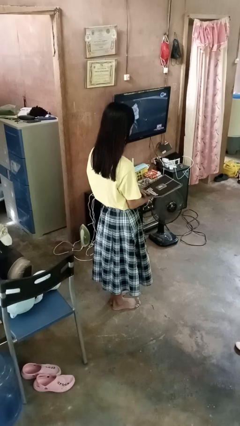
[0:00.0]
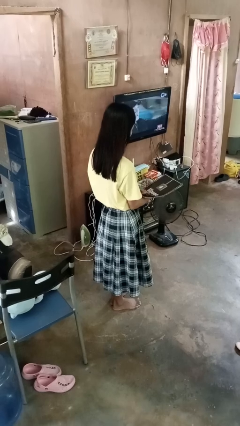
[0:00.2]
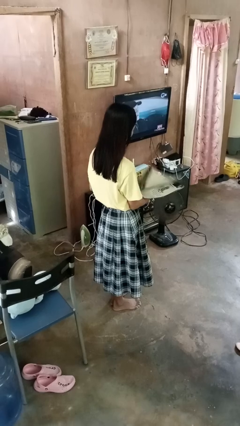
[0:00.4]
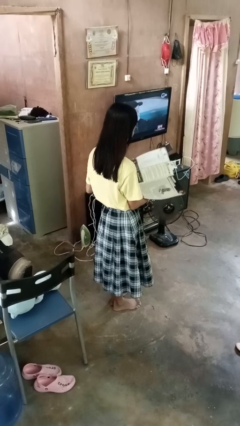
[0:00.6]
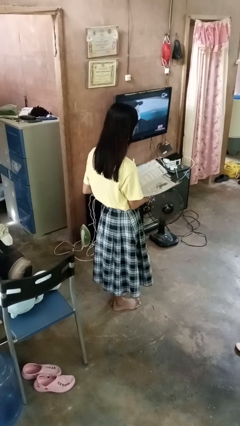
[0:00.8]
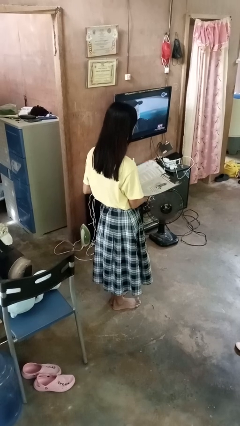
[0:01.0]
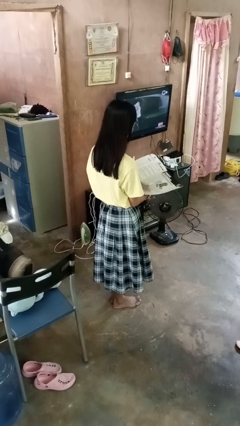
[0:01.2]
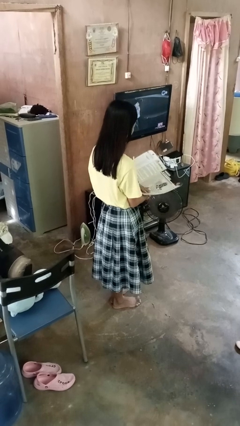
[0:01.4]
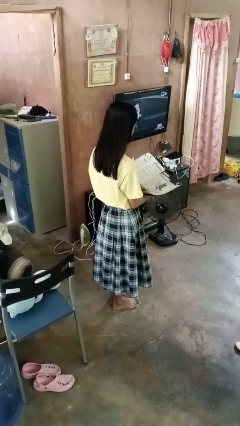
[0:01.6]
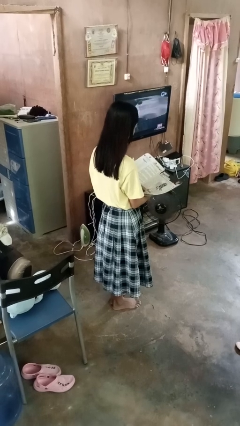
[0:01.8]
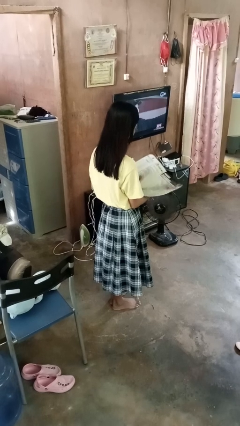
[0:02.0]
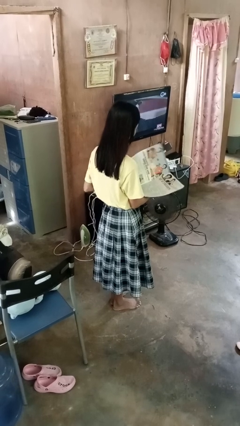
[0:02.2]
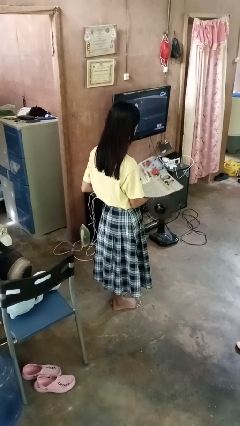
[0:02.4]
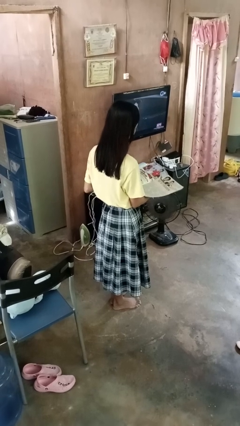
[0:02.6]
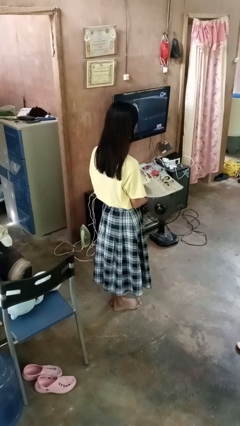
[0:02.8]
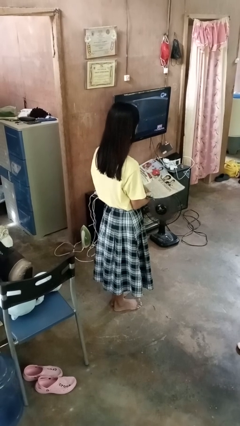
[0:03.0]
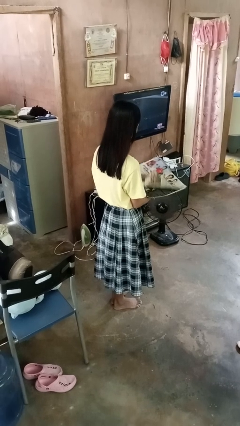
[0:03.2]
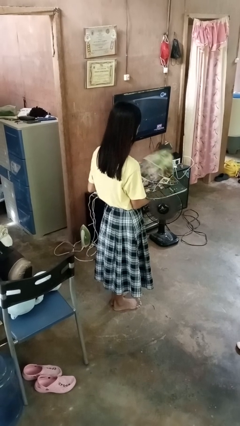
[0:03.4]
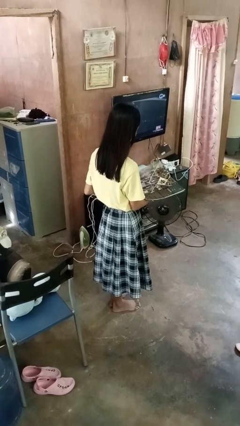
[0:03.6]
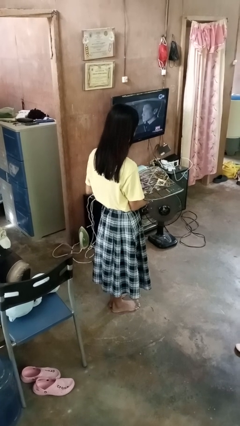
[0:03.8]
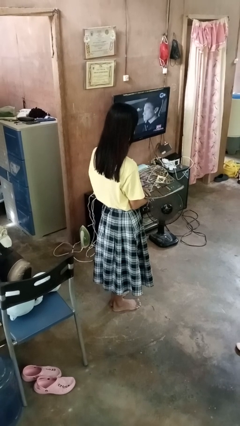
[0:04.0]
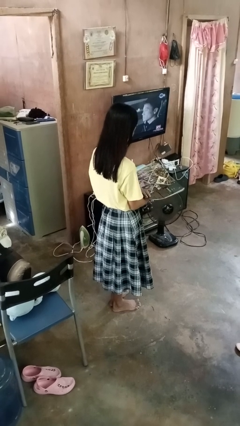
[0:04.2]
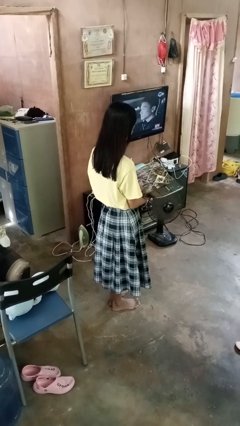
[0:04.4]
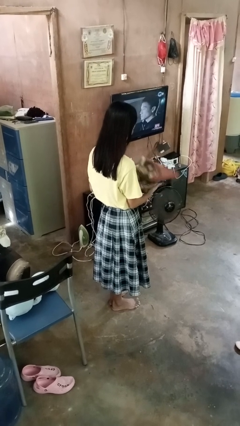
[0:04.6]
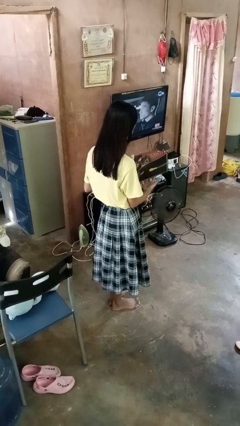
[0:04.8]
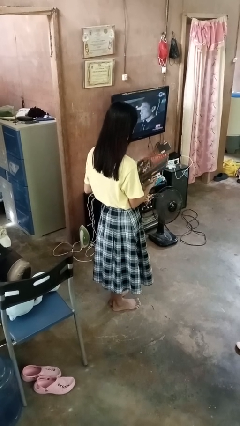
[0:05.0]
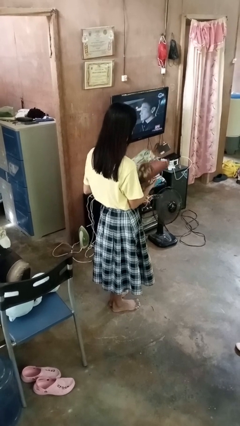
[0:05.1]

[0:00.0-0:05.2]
person reads magazine

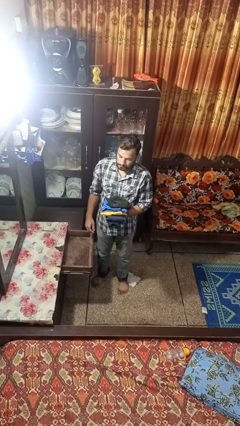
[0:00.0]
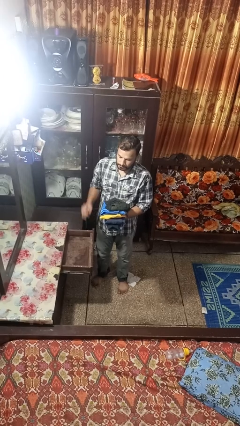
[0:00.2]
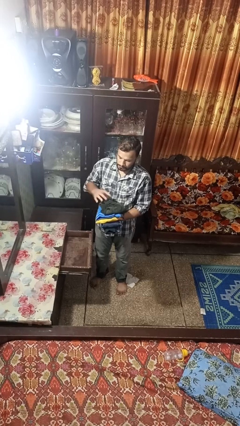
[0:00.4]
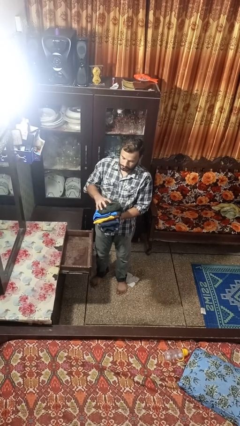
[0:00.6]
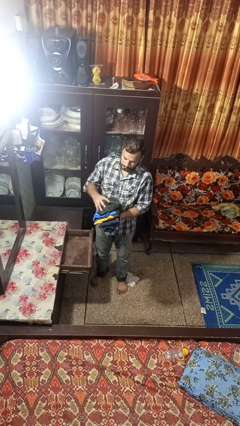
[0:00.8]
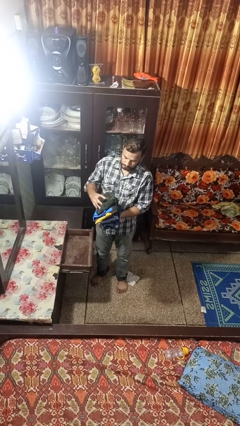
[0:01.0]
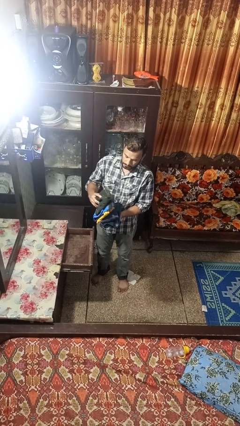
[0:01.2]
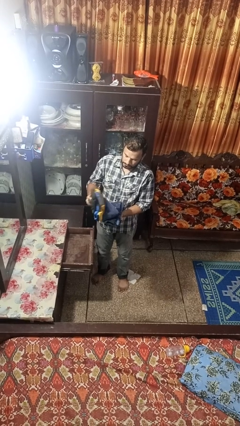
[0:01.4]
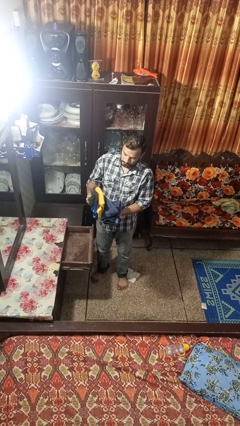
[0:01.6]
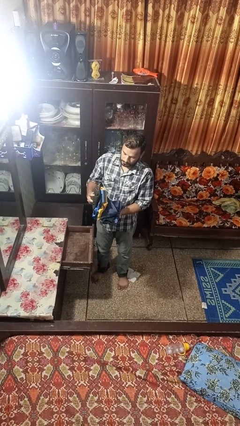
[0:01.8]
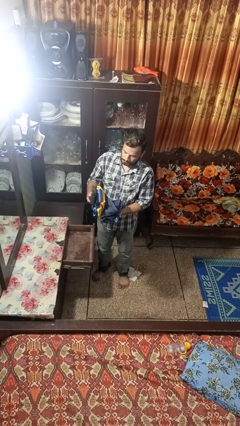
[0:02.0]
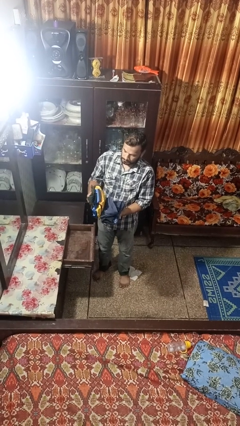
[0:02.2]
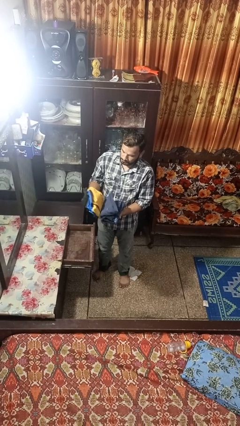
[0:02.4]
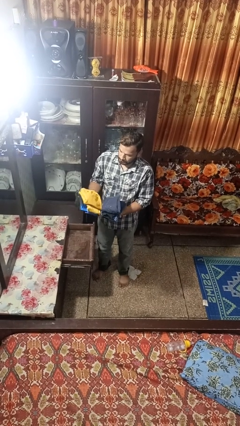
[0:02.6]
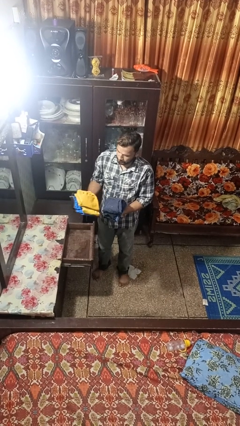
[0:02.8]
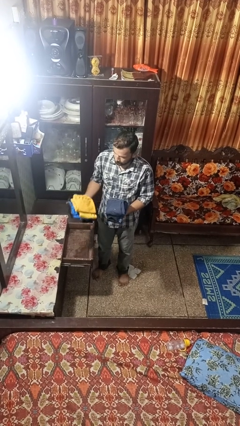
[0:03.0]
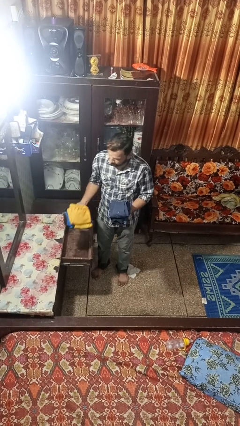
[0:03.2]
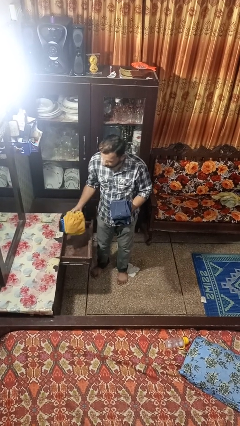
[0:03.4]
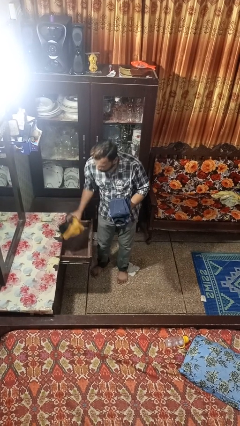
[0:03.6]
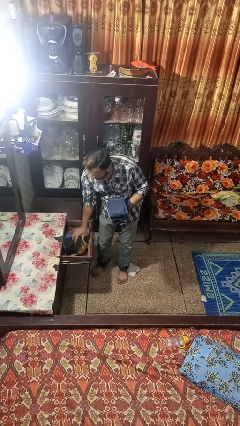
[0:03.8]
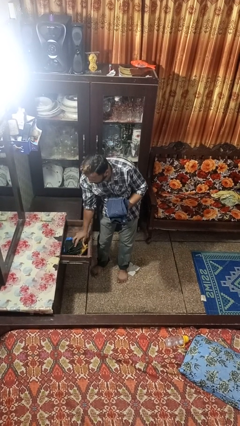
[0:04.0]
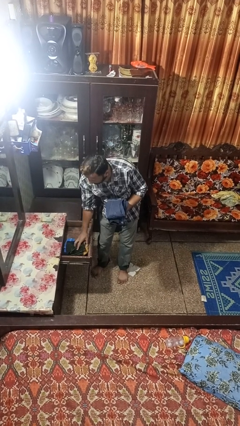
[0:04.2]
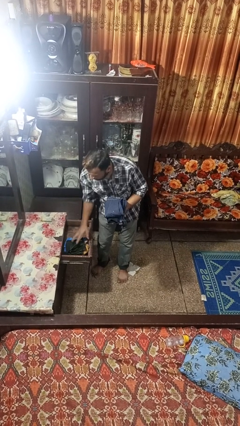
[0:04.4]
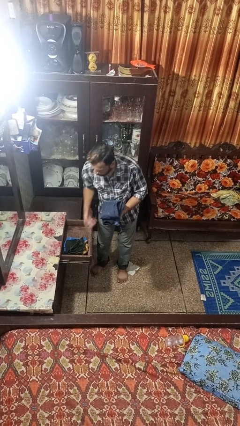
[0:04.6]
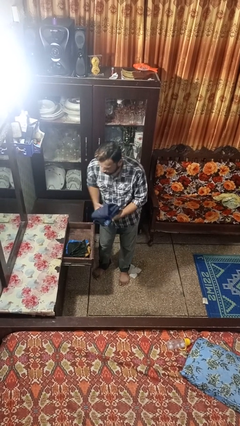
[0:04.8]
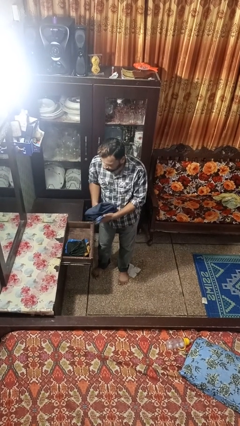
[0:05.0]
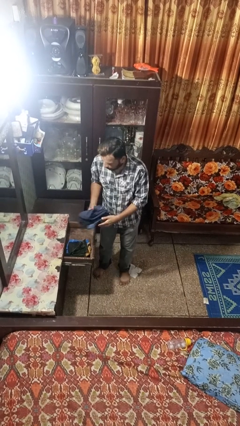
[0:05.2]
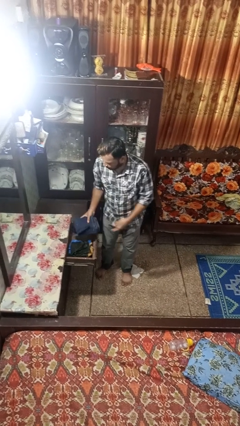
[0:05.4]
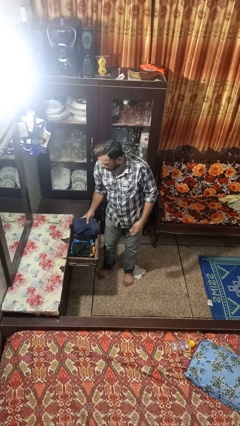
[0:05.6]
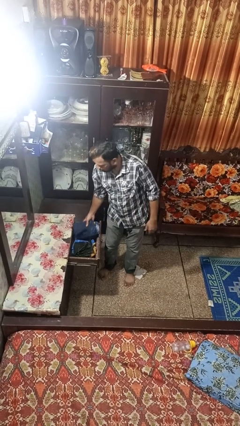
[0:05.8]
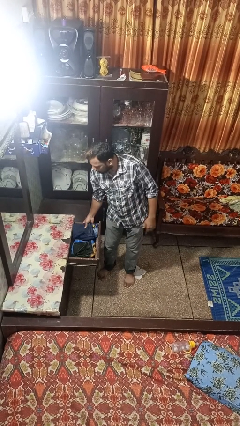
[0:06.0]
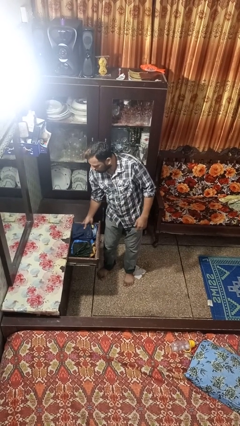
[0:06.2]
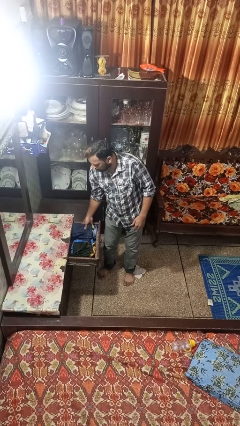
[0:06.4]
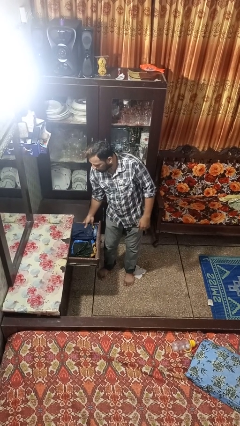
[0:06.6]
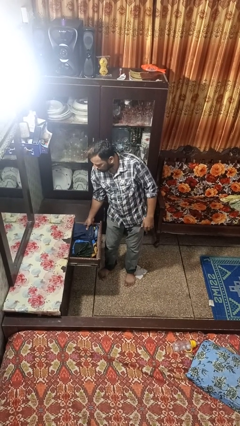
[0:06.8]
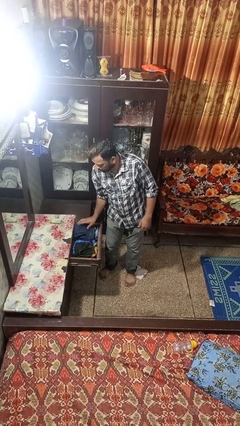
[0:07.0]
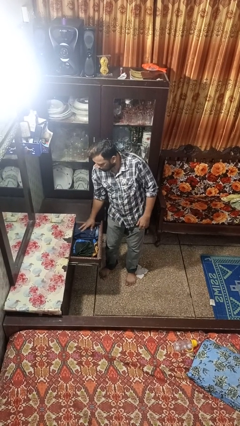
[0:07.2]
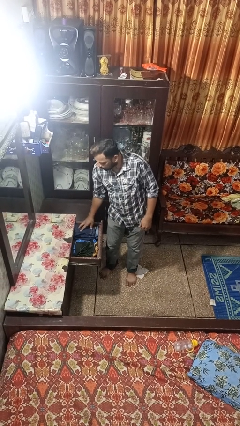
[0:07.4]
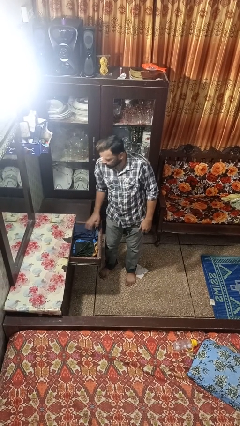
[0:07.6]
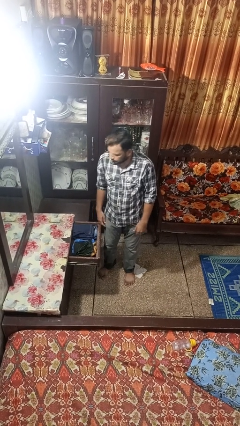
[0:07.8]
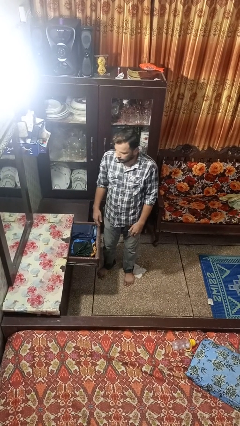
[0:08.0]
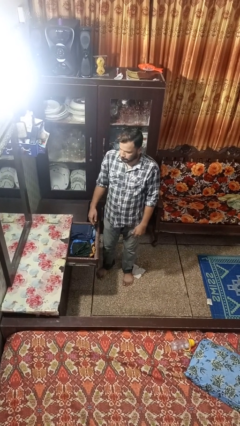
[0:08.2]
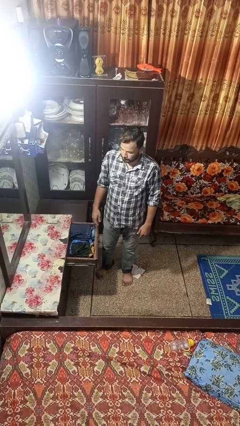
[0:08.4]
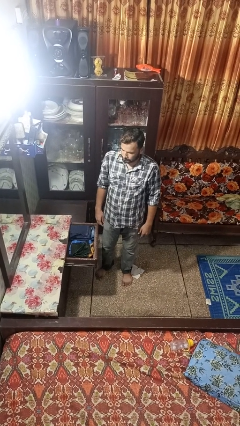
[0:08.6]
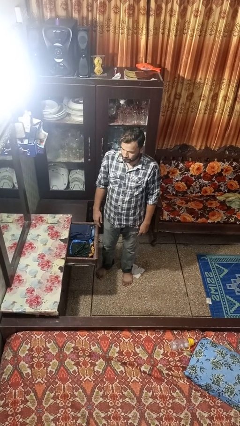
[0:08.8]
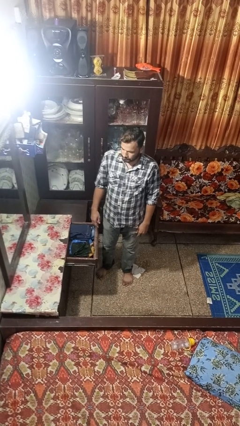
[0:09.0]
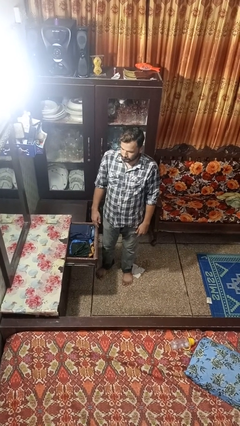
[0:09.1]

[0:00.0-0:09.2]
person puts clothes into dresser

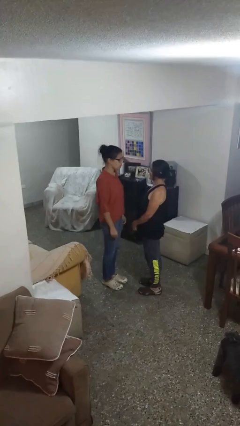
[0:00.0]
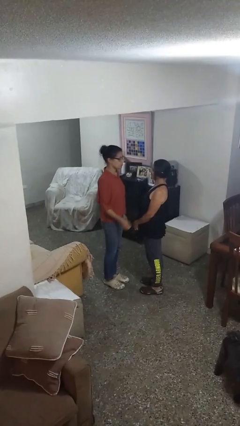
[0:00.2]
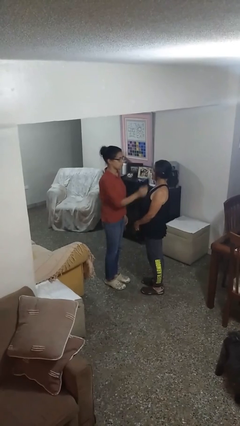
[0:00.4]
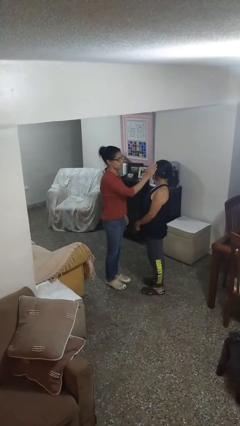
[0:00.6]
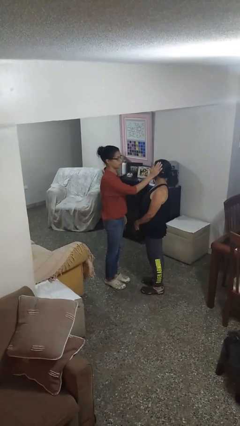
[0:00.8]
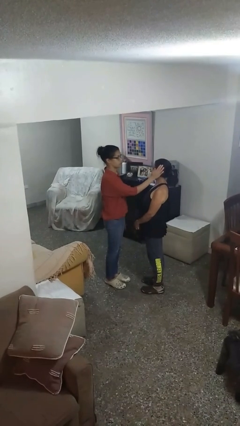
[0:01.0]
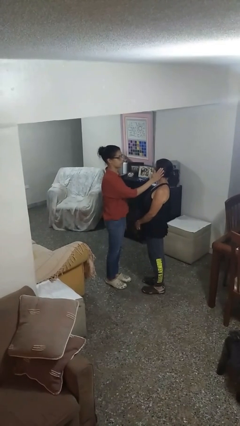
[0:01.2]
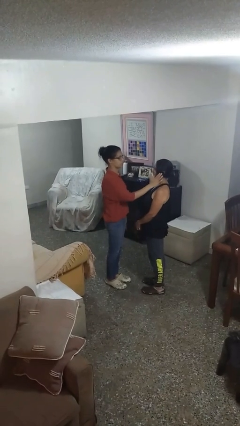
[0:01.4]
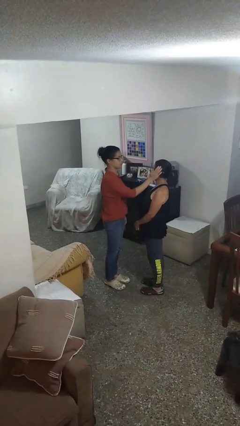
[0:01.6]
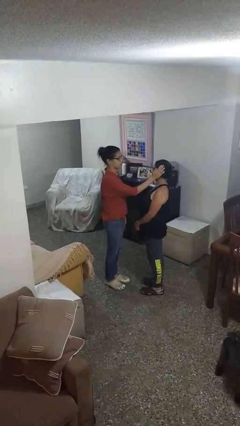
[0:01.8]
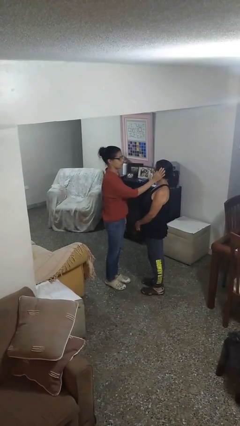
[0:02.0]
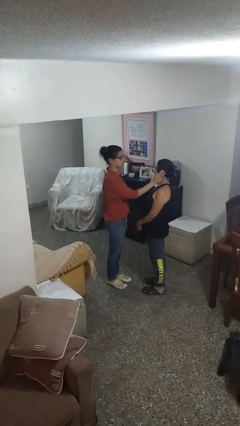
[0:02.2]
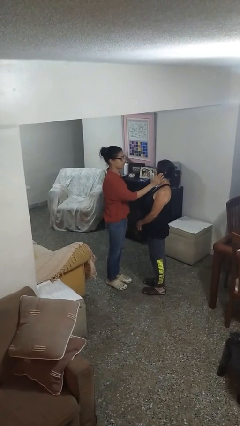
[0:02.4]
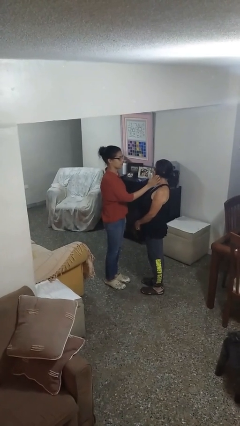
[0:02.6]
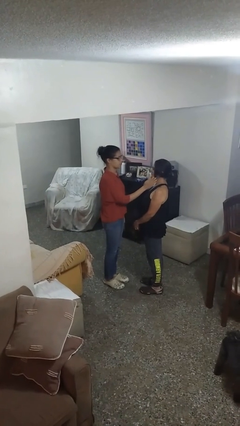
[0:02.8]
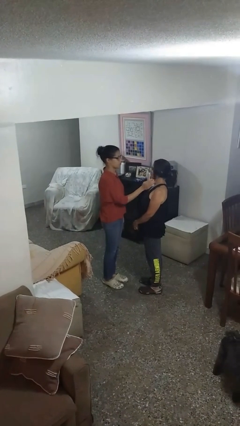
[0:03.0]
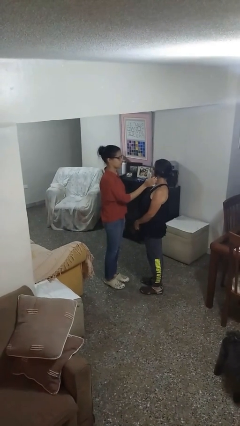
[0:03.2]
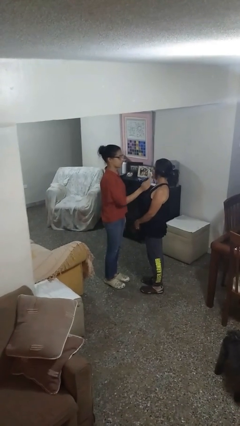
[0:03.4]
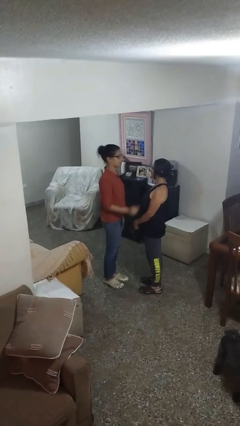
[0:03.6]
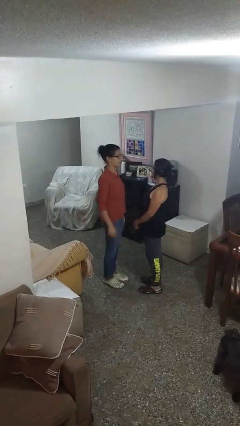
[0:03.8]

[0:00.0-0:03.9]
person touches face of person
